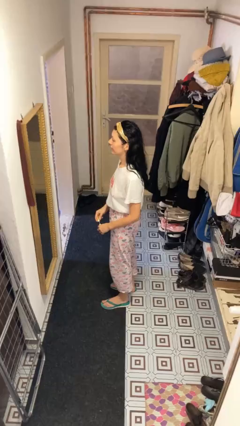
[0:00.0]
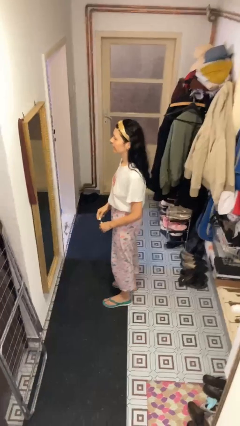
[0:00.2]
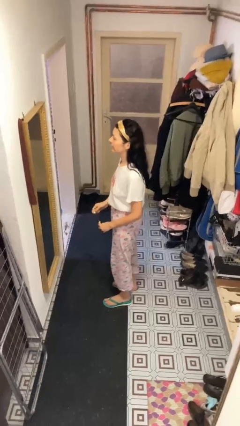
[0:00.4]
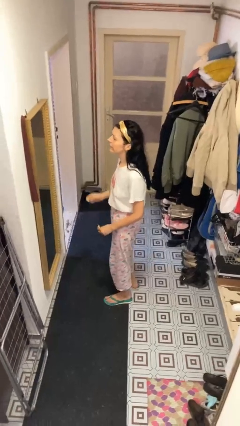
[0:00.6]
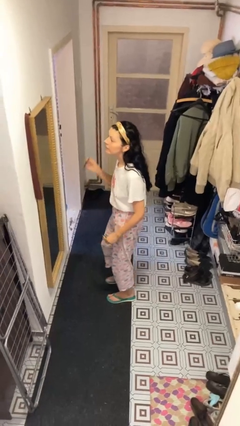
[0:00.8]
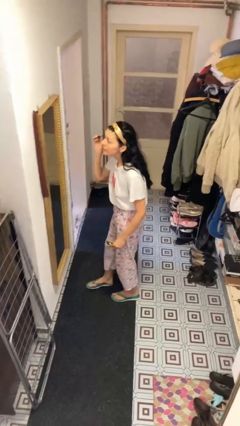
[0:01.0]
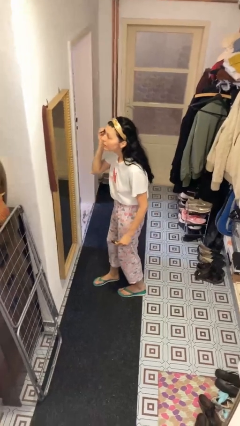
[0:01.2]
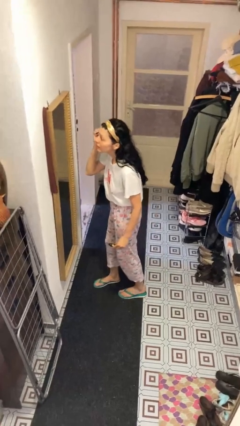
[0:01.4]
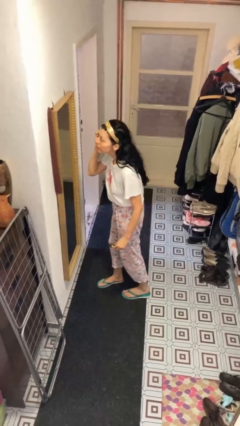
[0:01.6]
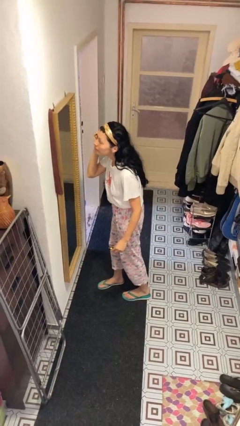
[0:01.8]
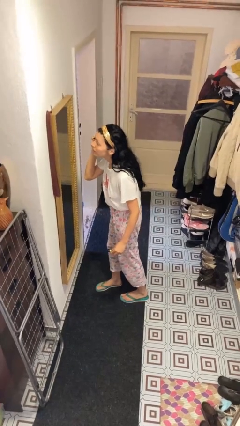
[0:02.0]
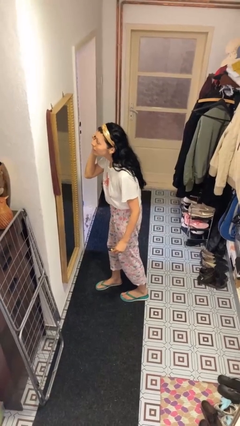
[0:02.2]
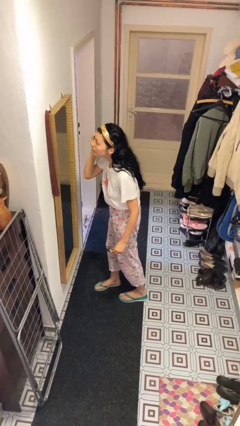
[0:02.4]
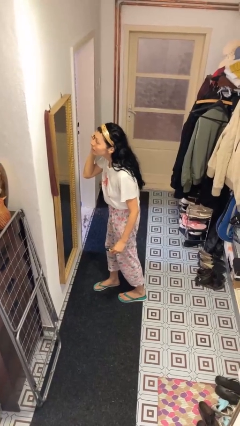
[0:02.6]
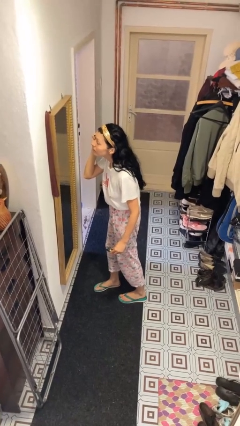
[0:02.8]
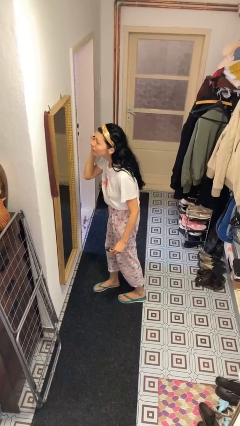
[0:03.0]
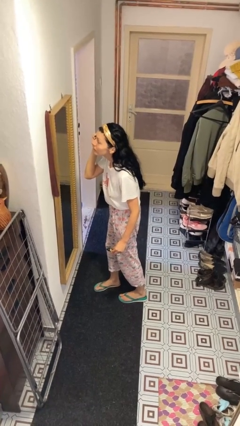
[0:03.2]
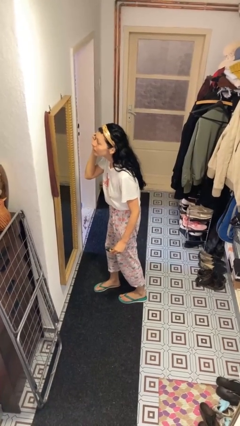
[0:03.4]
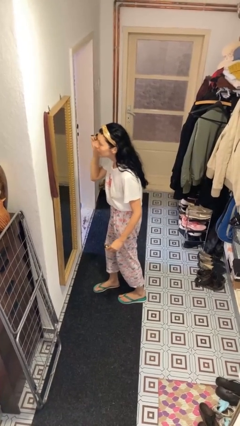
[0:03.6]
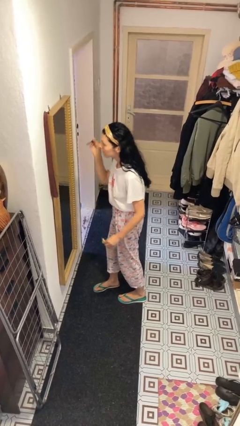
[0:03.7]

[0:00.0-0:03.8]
person applies eye makeup

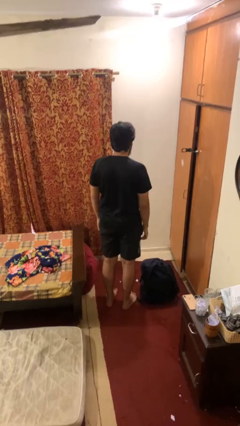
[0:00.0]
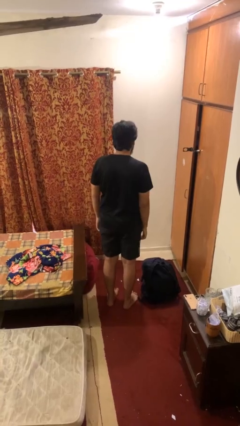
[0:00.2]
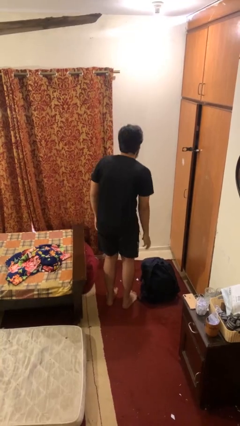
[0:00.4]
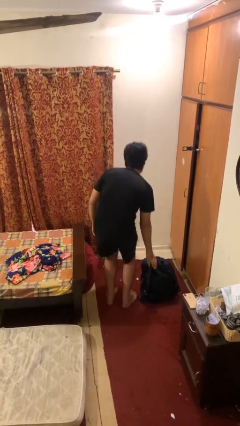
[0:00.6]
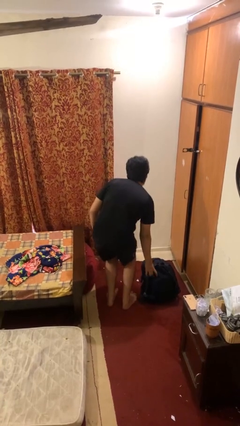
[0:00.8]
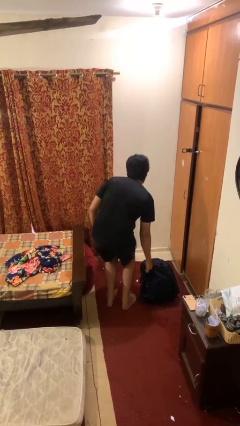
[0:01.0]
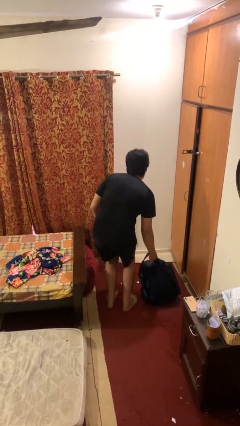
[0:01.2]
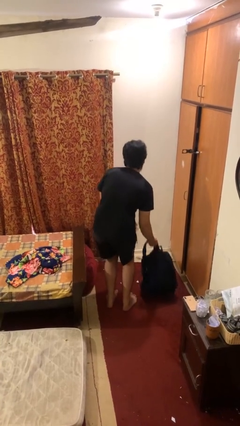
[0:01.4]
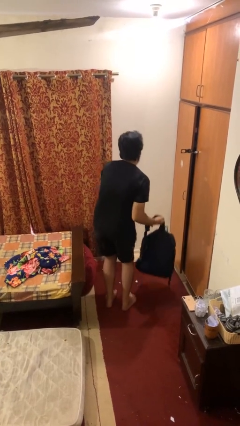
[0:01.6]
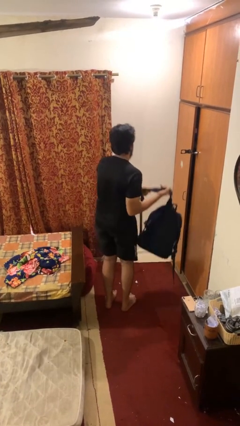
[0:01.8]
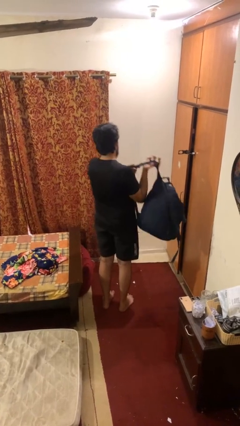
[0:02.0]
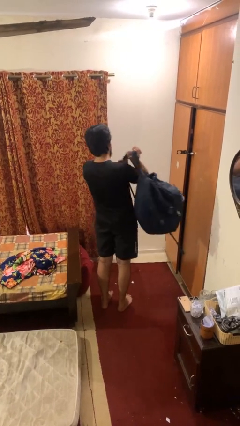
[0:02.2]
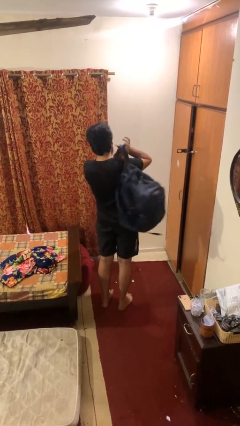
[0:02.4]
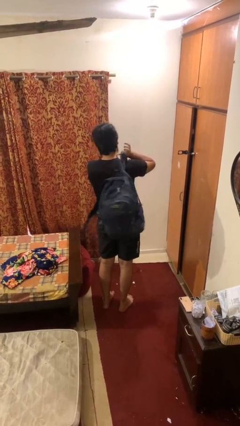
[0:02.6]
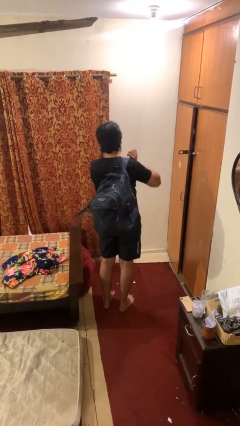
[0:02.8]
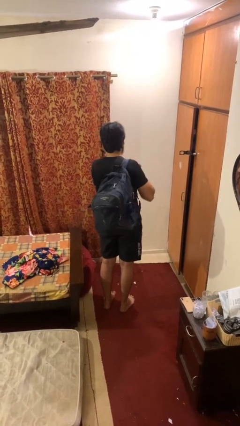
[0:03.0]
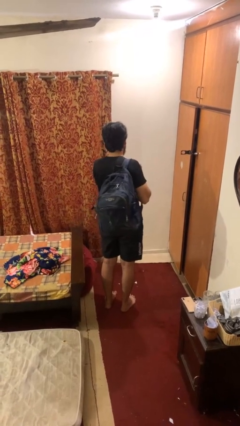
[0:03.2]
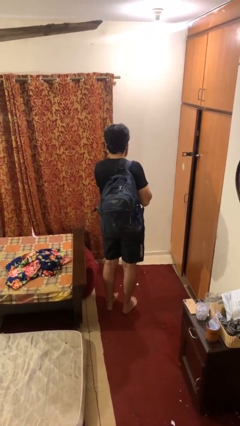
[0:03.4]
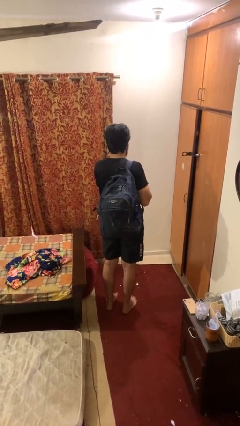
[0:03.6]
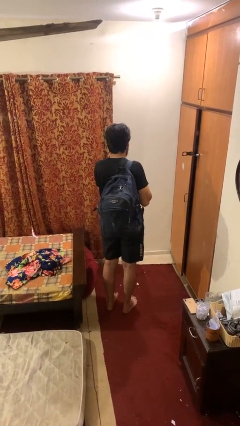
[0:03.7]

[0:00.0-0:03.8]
person puts on backpack

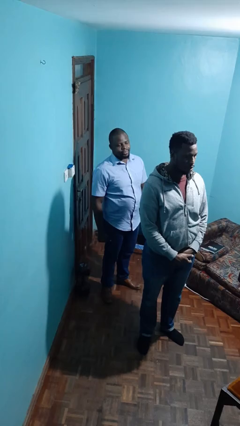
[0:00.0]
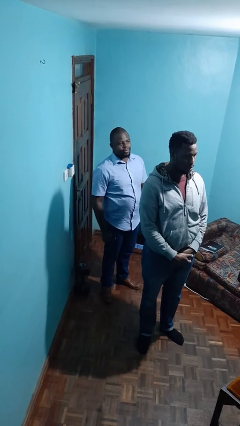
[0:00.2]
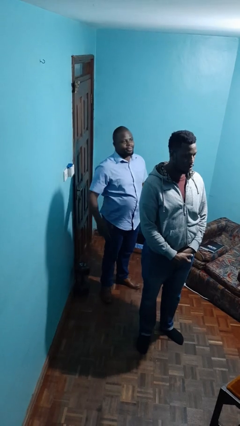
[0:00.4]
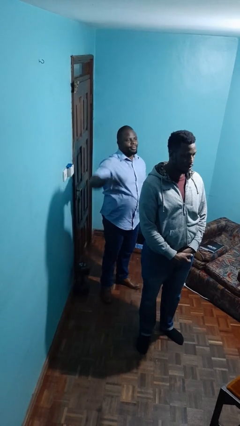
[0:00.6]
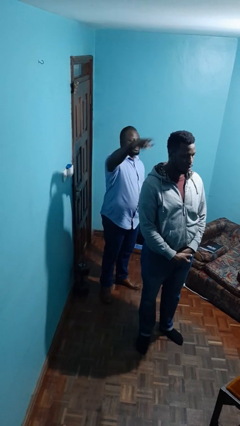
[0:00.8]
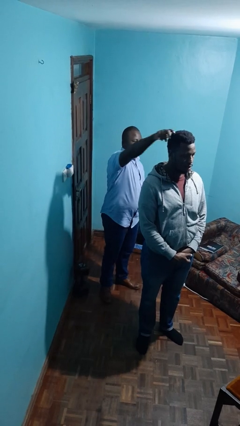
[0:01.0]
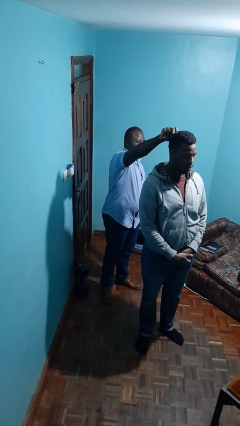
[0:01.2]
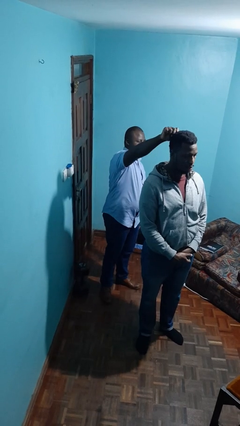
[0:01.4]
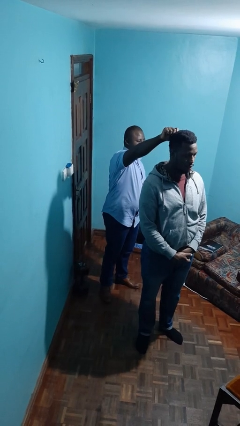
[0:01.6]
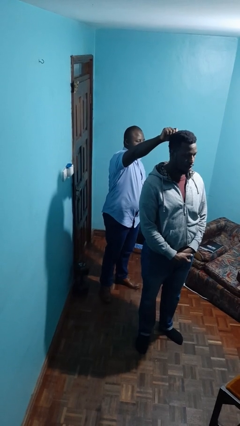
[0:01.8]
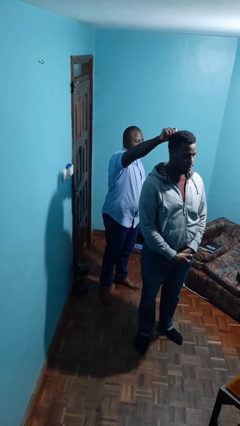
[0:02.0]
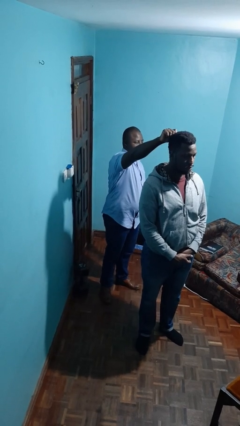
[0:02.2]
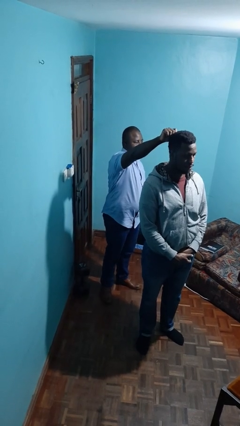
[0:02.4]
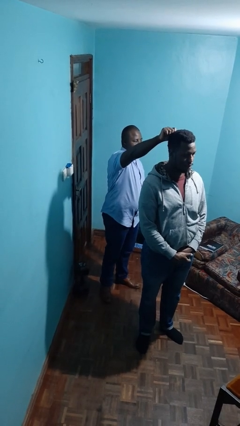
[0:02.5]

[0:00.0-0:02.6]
person grabs person by hair

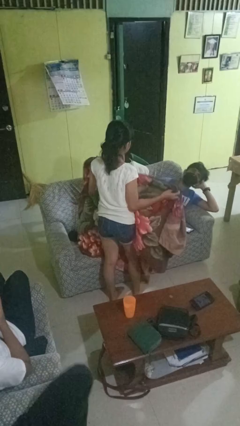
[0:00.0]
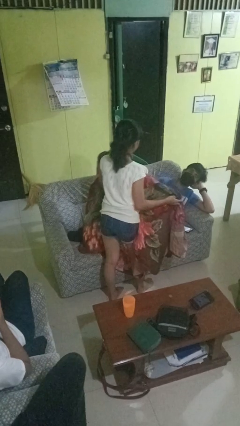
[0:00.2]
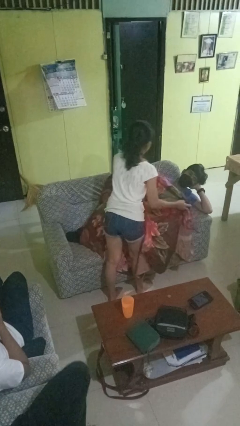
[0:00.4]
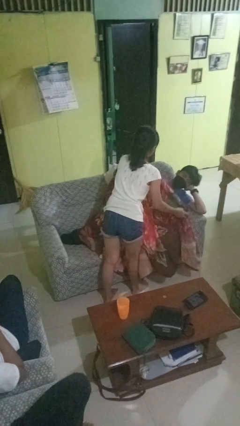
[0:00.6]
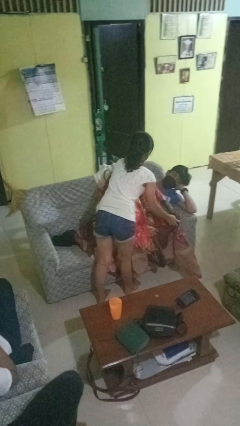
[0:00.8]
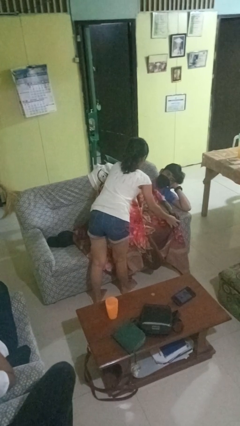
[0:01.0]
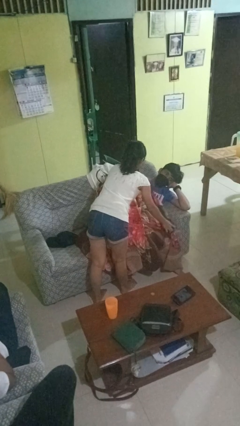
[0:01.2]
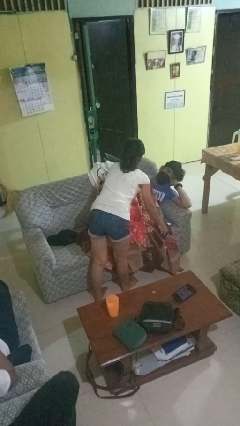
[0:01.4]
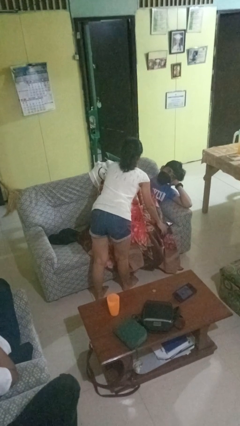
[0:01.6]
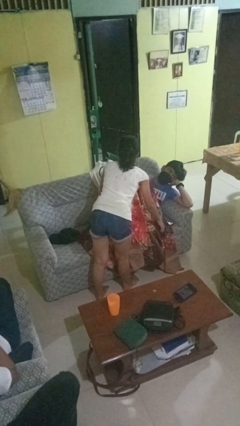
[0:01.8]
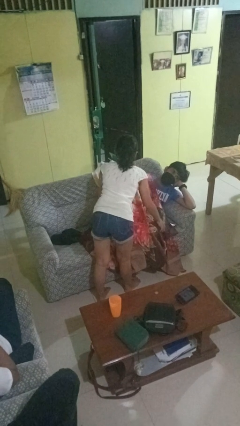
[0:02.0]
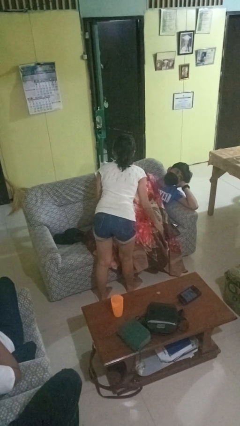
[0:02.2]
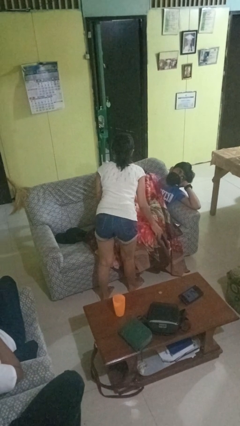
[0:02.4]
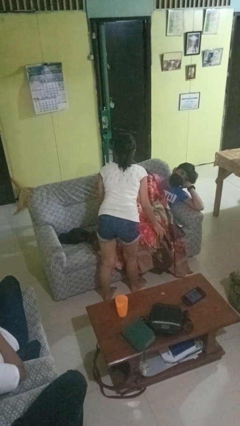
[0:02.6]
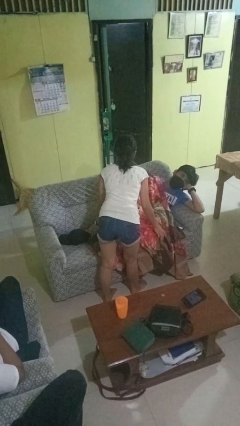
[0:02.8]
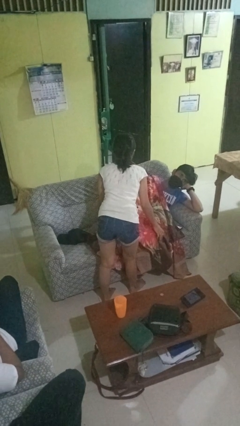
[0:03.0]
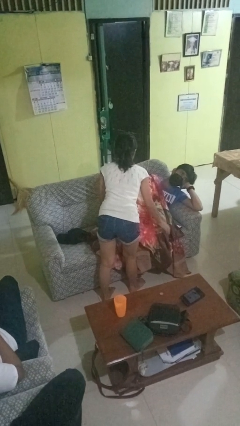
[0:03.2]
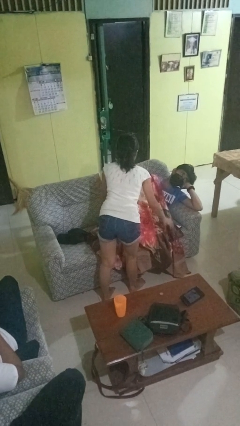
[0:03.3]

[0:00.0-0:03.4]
person covers friend with blanket

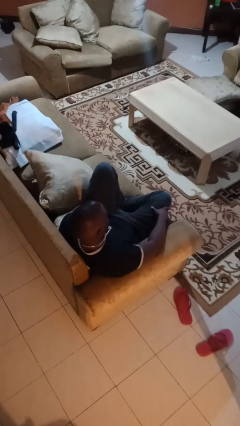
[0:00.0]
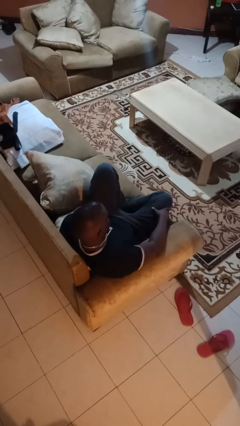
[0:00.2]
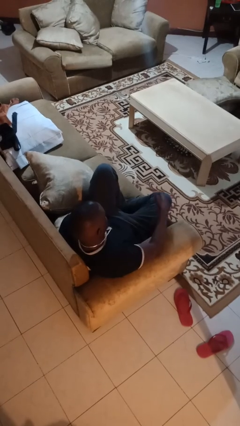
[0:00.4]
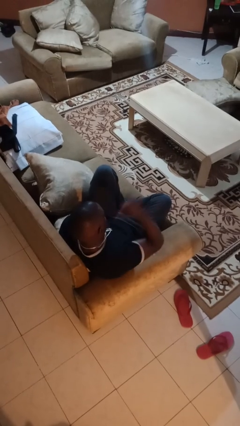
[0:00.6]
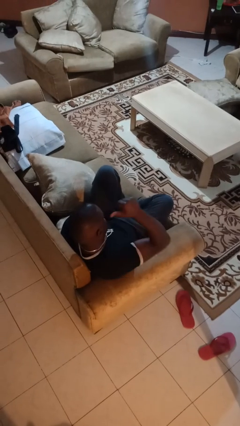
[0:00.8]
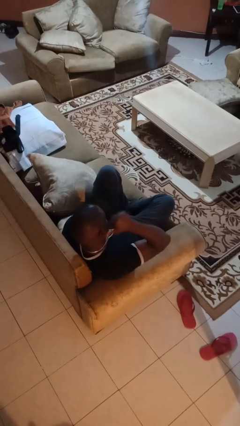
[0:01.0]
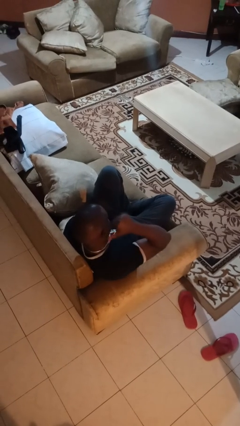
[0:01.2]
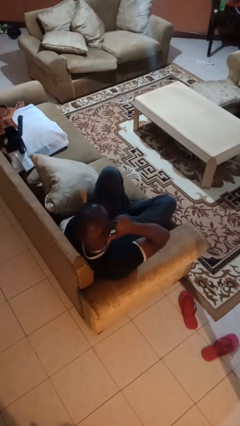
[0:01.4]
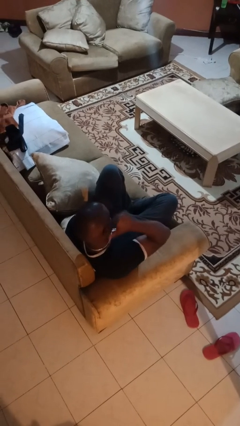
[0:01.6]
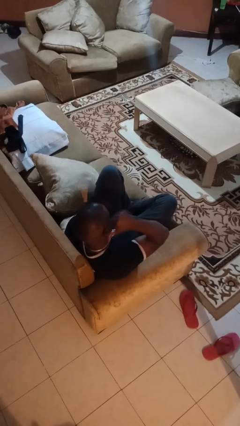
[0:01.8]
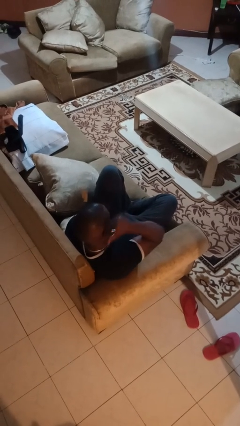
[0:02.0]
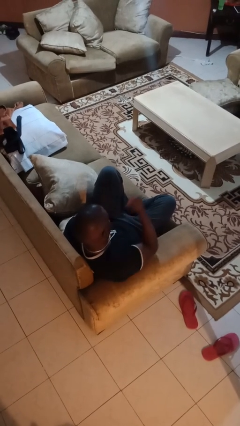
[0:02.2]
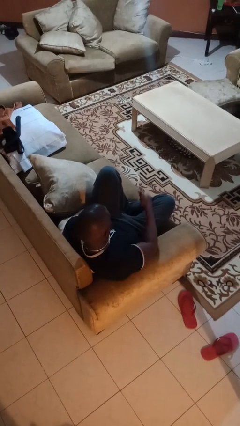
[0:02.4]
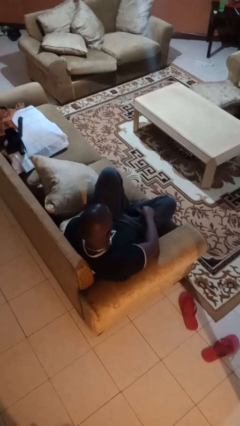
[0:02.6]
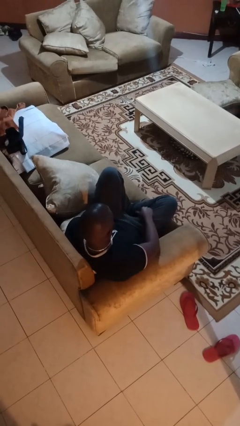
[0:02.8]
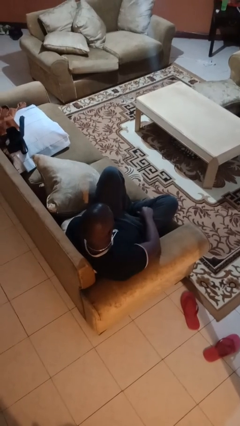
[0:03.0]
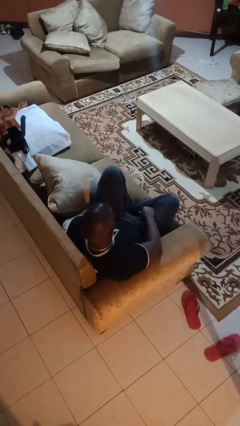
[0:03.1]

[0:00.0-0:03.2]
person gestures behind me

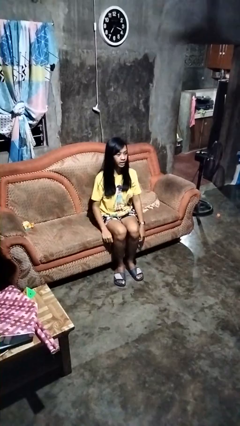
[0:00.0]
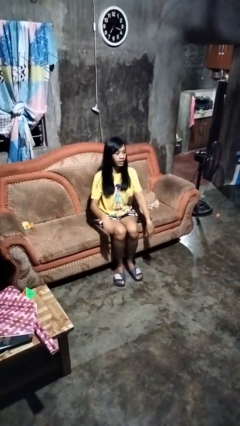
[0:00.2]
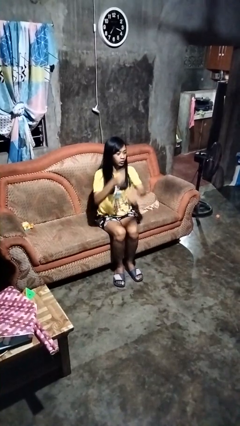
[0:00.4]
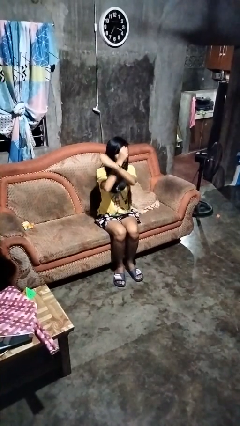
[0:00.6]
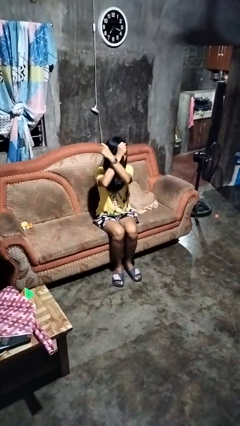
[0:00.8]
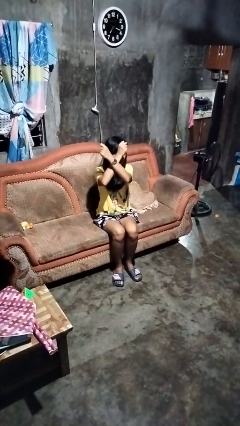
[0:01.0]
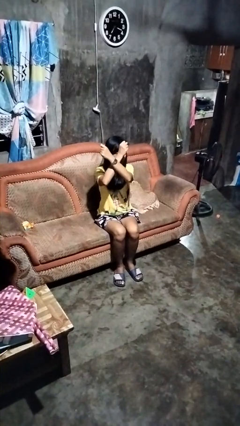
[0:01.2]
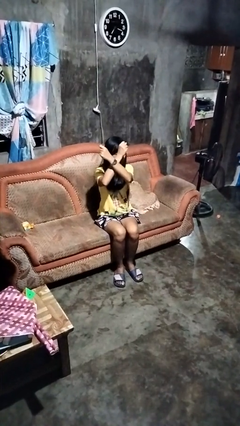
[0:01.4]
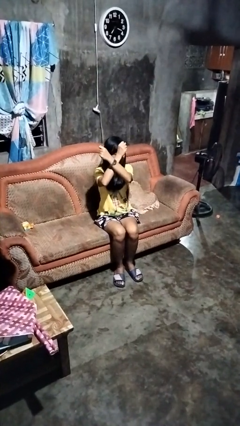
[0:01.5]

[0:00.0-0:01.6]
person gestures arms x
